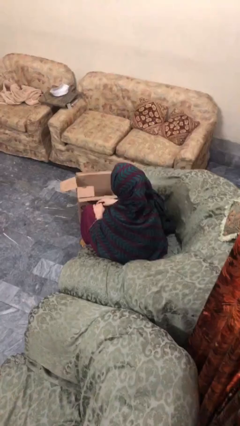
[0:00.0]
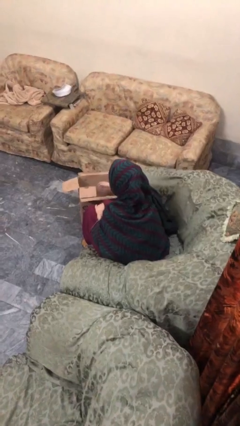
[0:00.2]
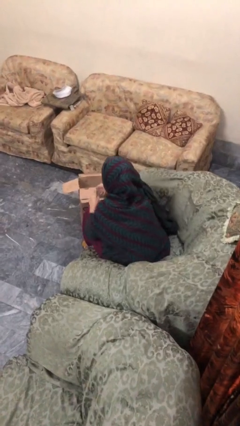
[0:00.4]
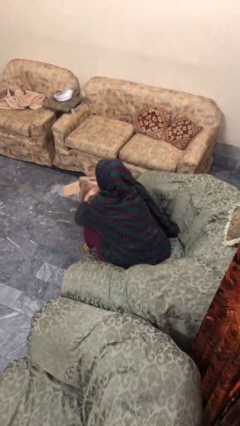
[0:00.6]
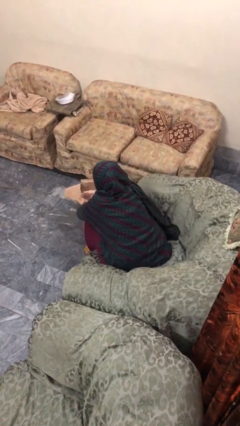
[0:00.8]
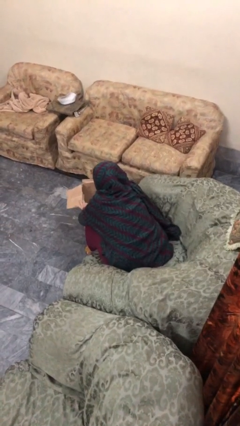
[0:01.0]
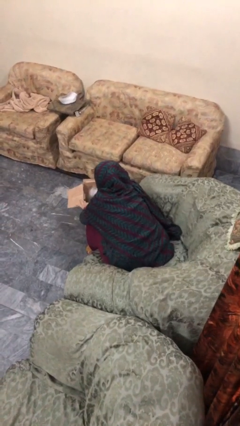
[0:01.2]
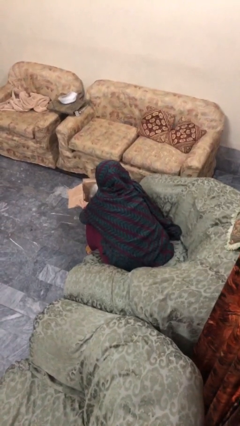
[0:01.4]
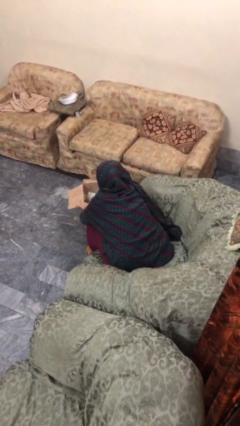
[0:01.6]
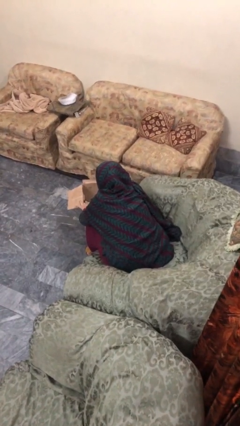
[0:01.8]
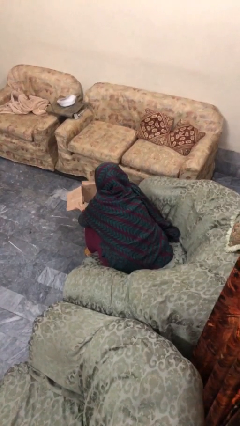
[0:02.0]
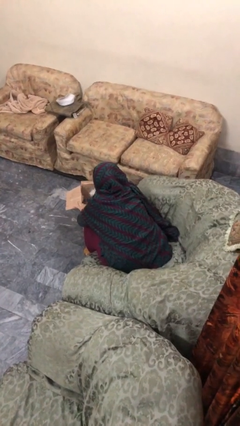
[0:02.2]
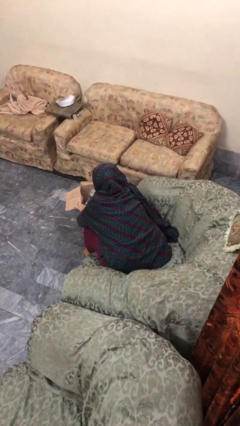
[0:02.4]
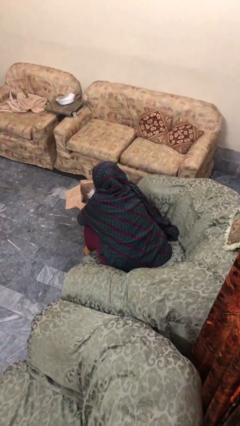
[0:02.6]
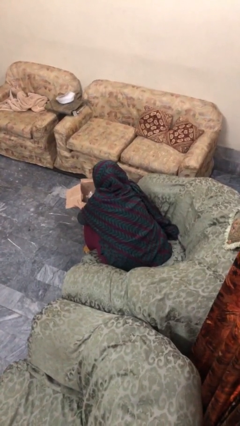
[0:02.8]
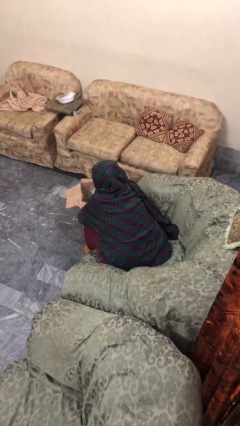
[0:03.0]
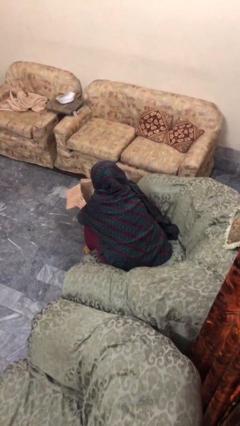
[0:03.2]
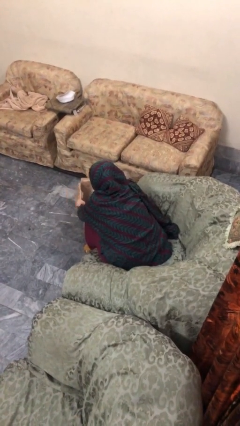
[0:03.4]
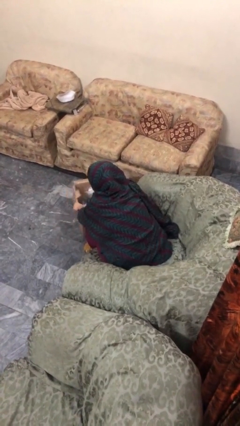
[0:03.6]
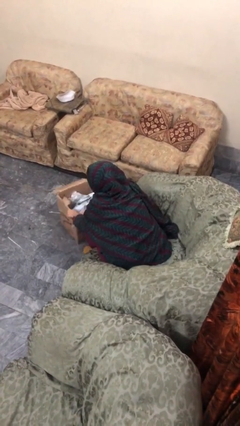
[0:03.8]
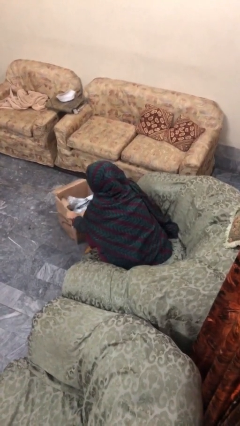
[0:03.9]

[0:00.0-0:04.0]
person searches in box

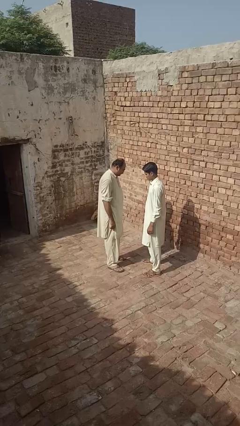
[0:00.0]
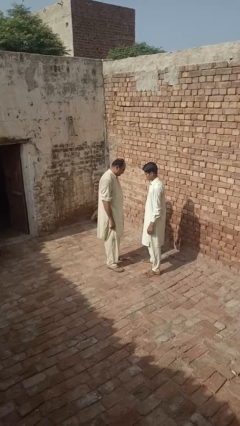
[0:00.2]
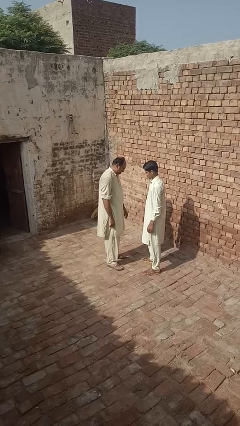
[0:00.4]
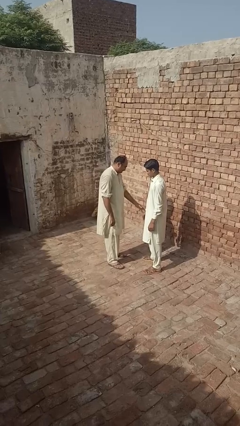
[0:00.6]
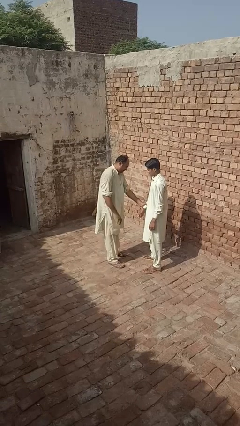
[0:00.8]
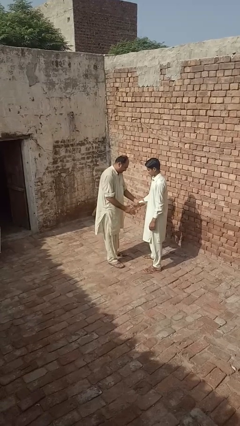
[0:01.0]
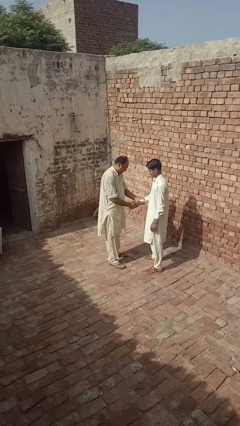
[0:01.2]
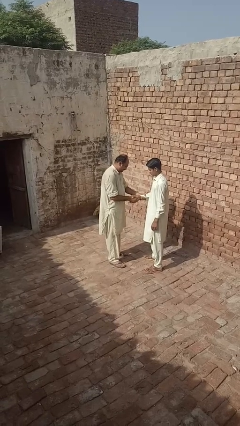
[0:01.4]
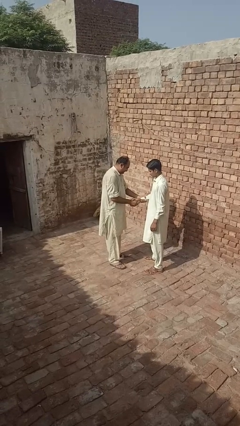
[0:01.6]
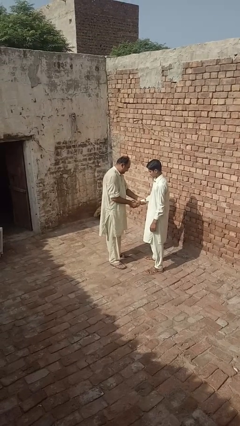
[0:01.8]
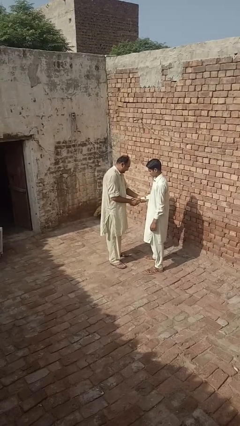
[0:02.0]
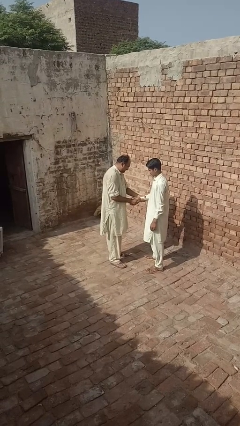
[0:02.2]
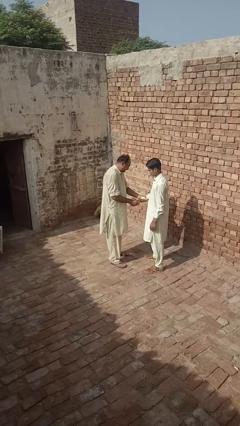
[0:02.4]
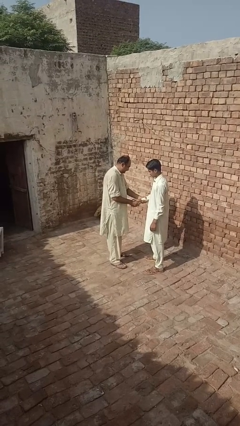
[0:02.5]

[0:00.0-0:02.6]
person grabs person by forearm

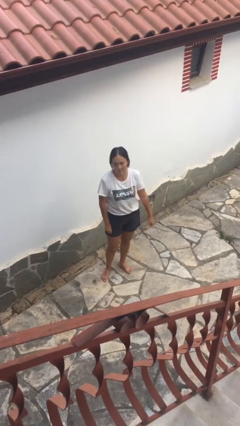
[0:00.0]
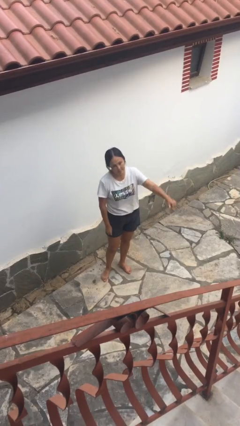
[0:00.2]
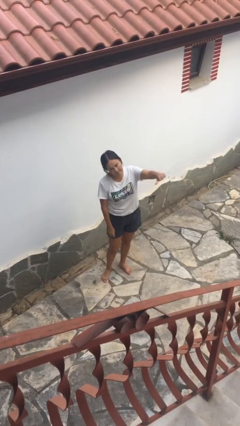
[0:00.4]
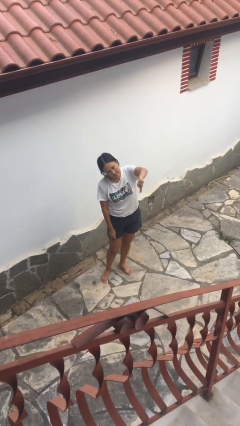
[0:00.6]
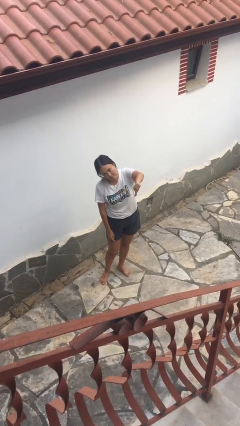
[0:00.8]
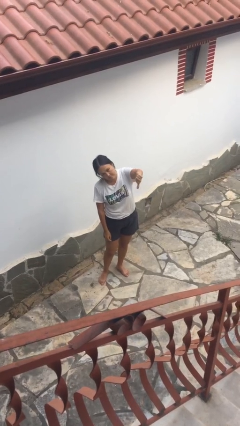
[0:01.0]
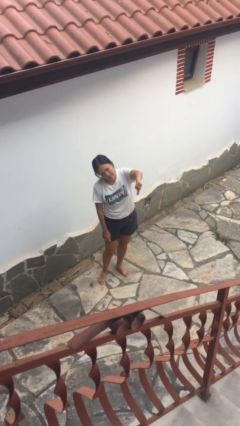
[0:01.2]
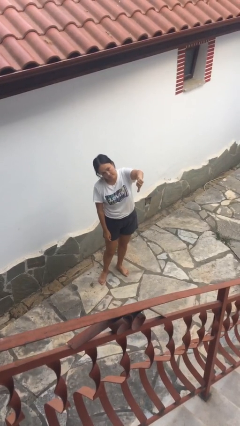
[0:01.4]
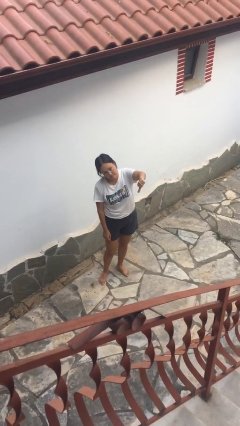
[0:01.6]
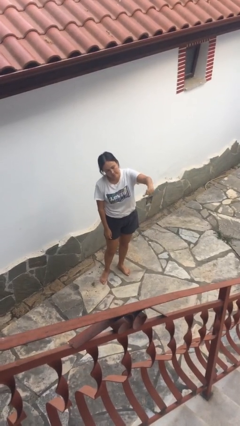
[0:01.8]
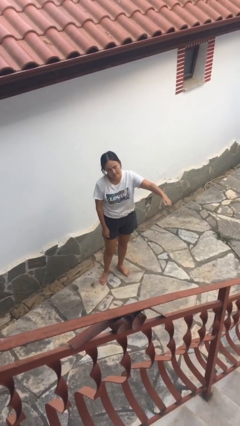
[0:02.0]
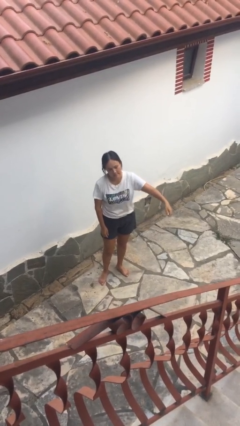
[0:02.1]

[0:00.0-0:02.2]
person gestures thumbs down

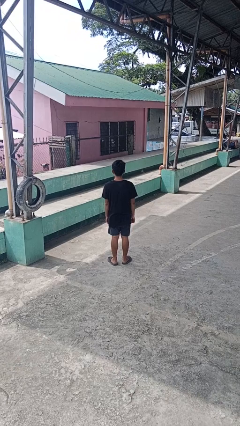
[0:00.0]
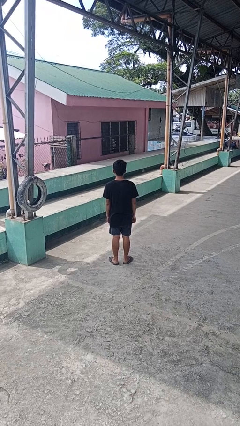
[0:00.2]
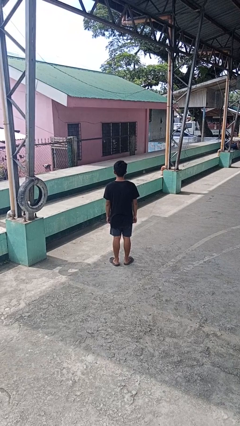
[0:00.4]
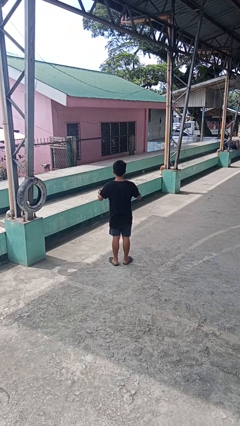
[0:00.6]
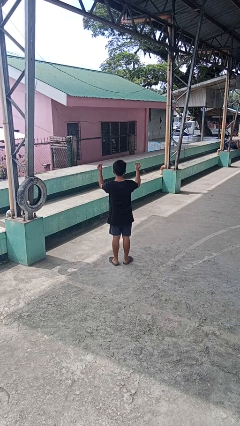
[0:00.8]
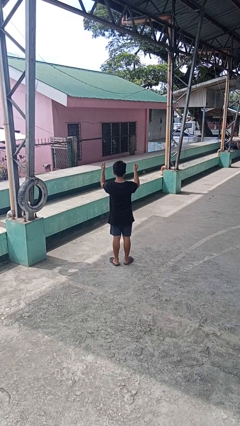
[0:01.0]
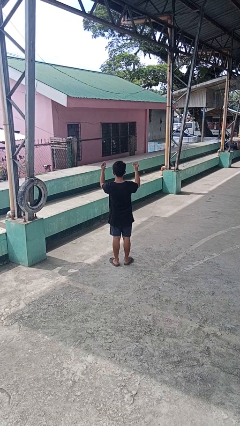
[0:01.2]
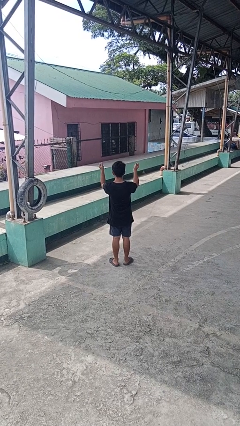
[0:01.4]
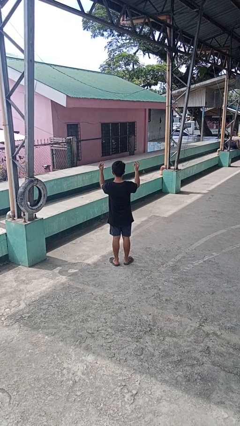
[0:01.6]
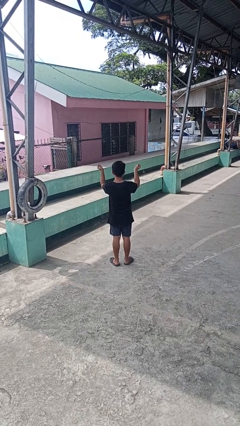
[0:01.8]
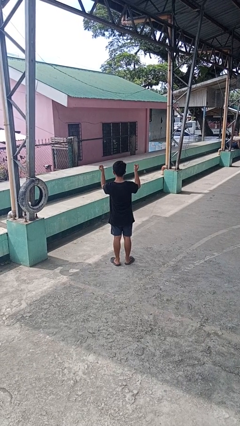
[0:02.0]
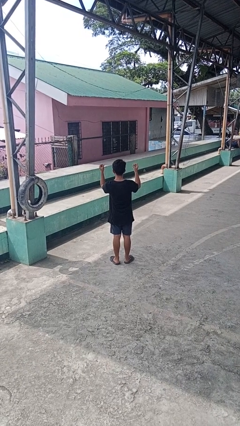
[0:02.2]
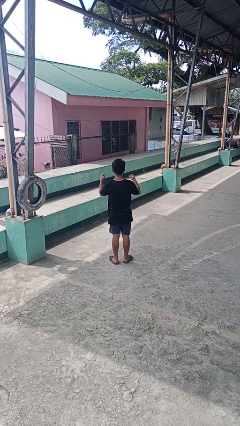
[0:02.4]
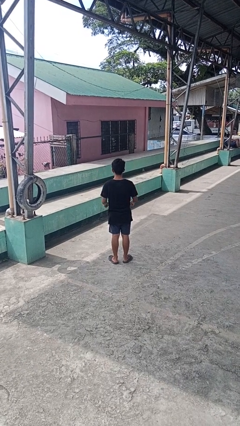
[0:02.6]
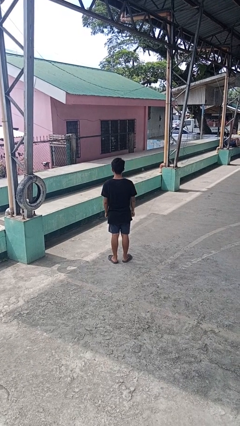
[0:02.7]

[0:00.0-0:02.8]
person snaps fingers

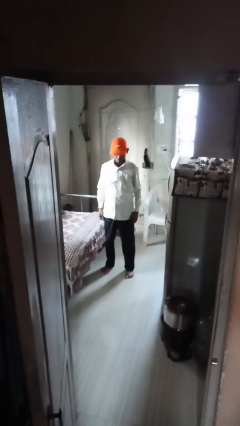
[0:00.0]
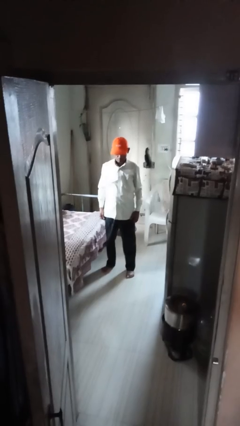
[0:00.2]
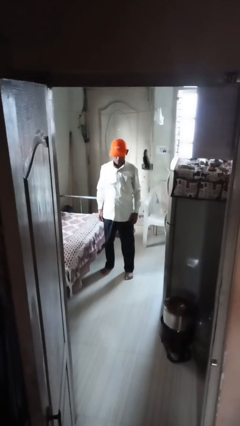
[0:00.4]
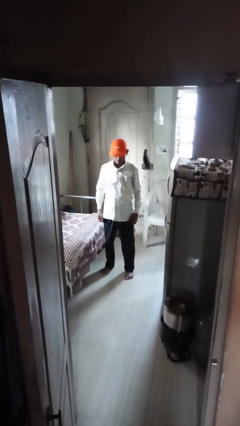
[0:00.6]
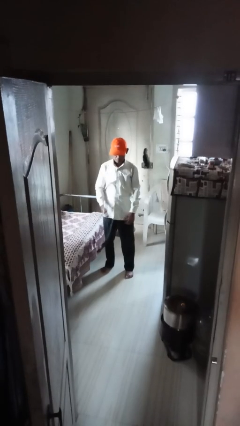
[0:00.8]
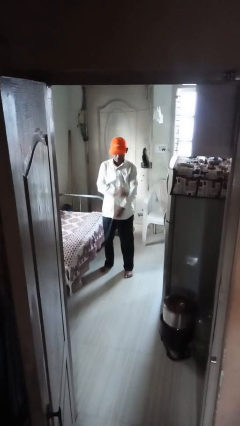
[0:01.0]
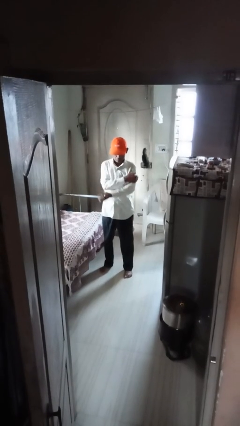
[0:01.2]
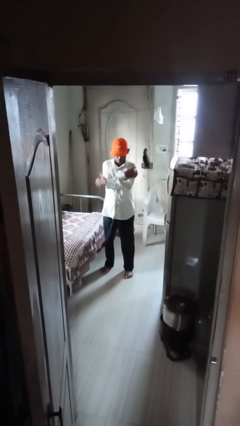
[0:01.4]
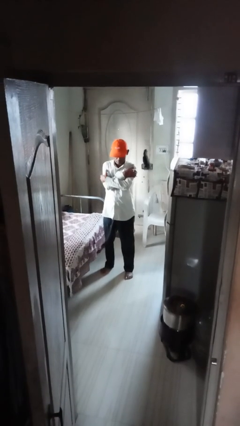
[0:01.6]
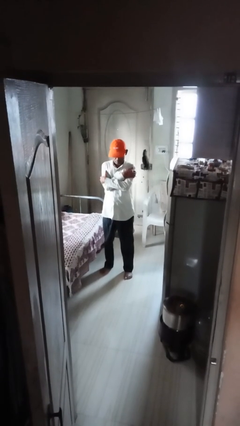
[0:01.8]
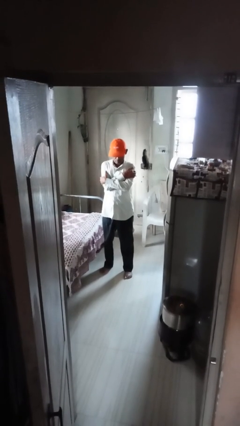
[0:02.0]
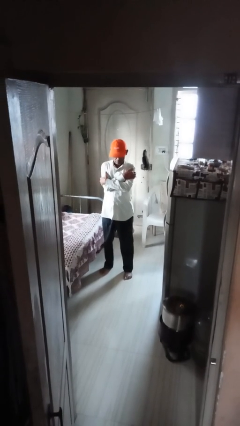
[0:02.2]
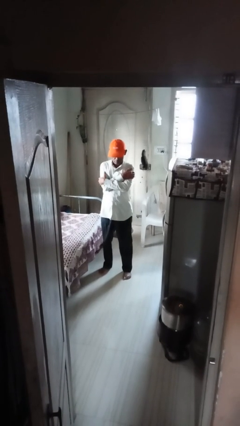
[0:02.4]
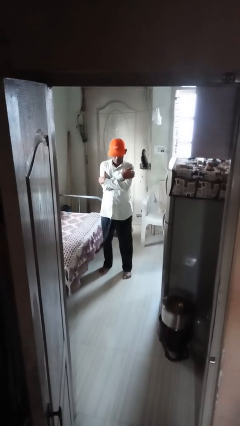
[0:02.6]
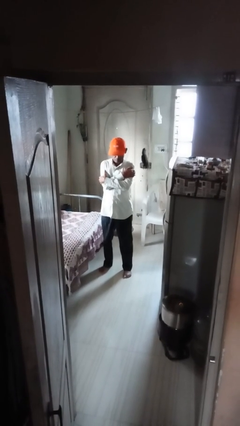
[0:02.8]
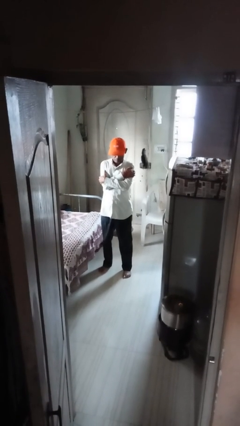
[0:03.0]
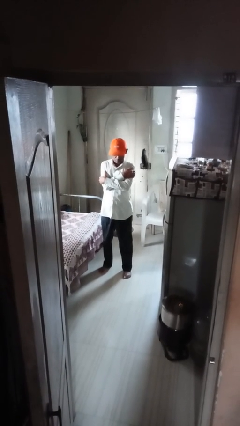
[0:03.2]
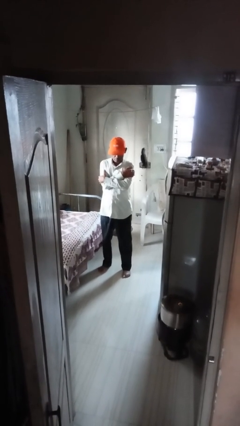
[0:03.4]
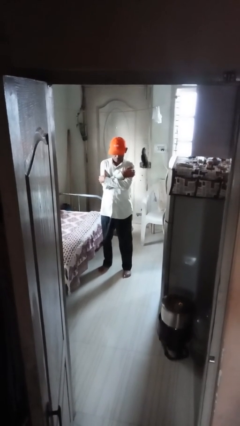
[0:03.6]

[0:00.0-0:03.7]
person crosses arms

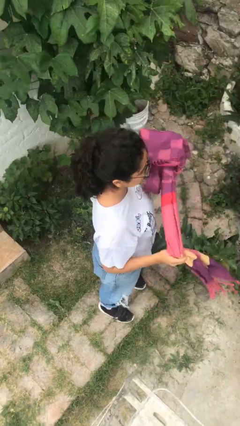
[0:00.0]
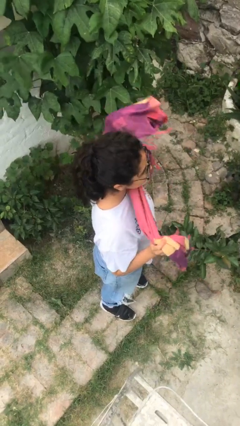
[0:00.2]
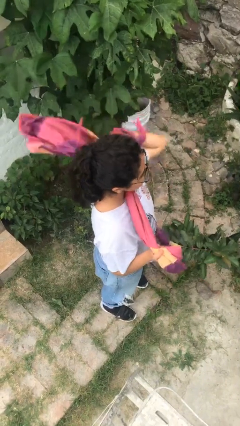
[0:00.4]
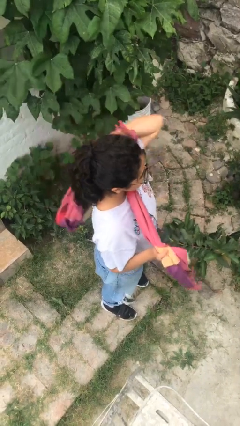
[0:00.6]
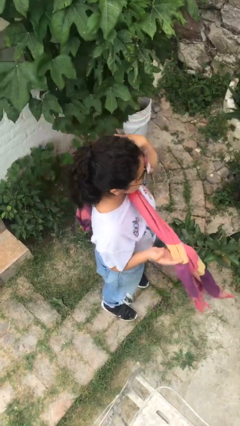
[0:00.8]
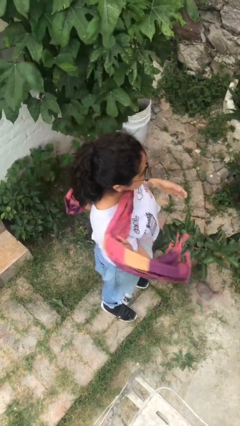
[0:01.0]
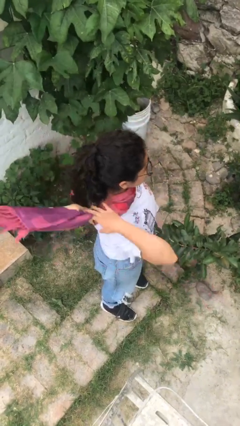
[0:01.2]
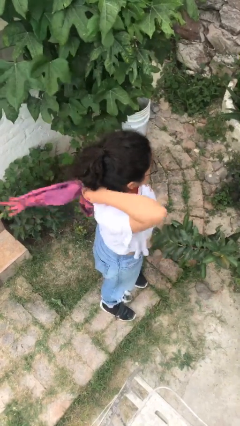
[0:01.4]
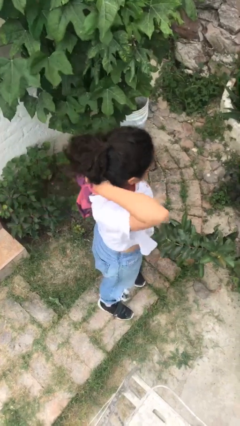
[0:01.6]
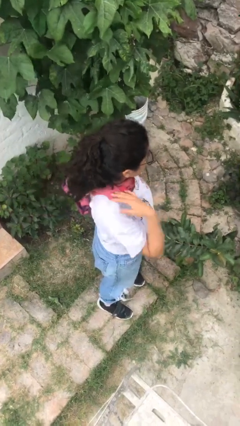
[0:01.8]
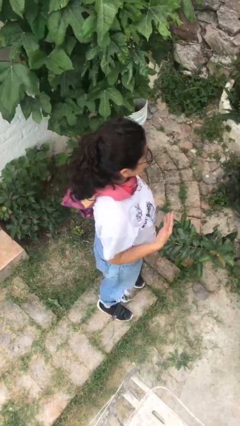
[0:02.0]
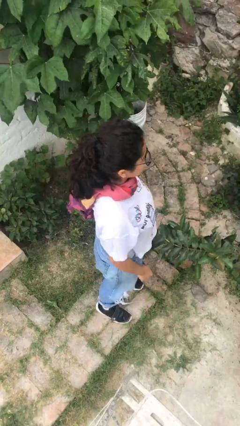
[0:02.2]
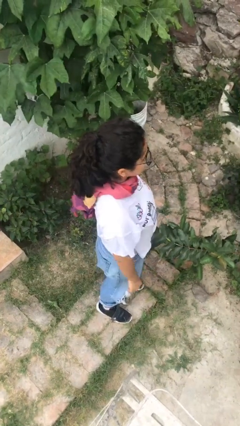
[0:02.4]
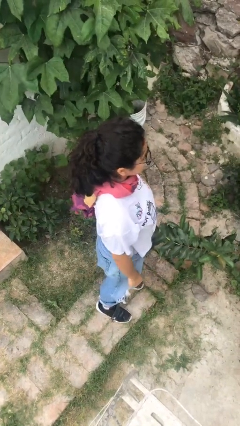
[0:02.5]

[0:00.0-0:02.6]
person puts on scarf
